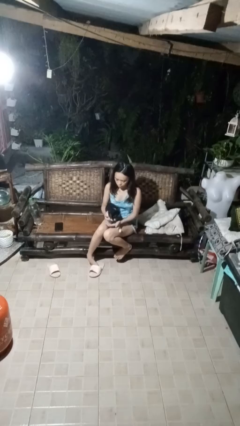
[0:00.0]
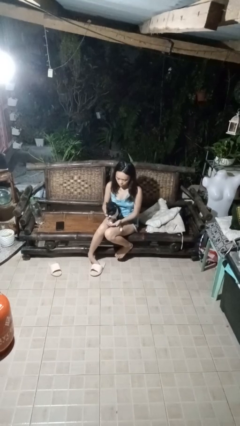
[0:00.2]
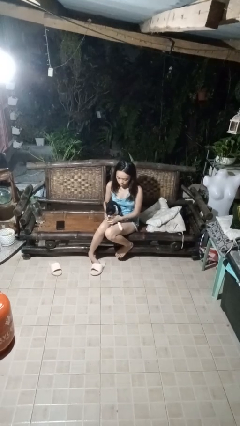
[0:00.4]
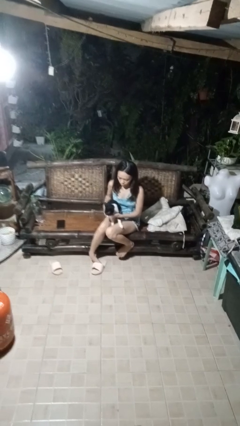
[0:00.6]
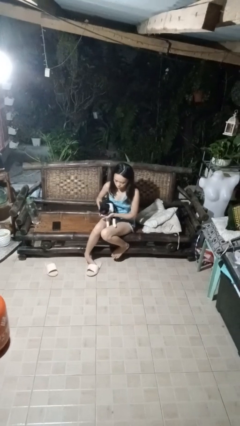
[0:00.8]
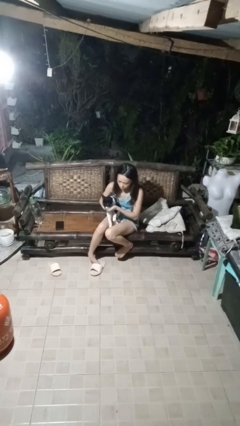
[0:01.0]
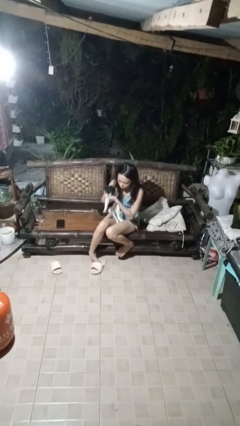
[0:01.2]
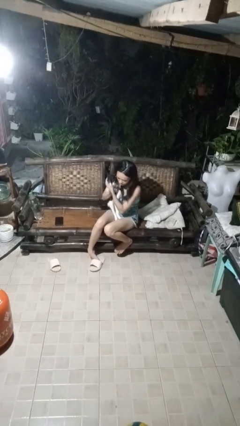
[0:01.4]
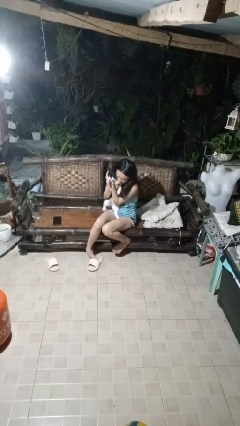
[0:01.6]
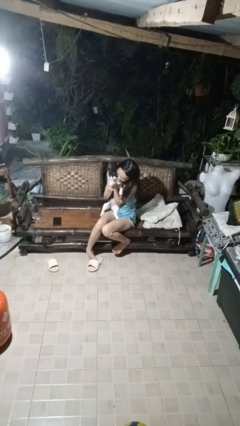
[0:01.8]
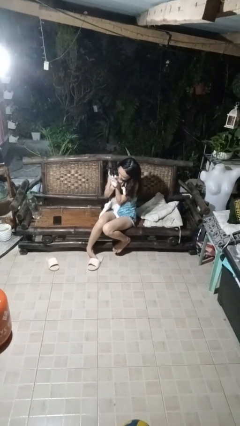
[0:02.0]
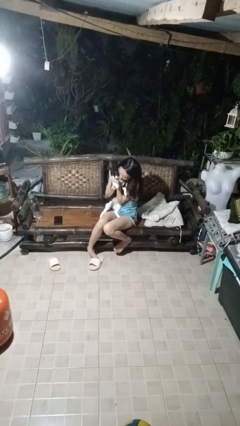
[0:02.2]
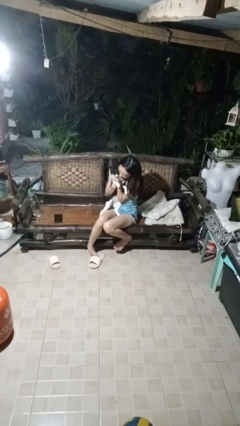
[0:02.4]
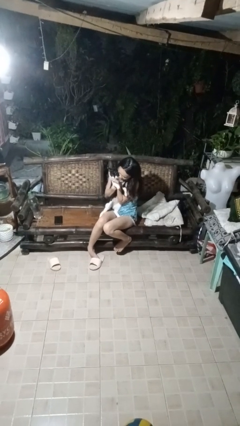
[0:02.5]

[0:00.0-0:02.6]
person hugs cat

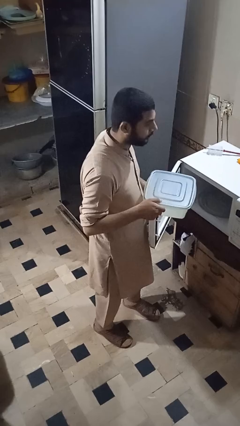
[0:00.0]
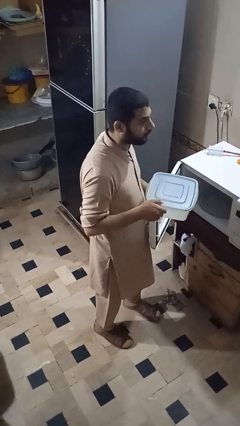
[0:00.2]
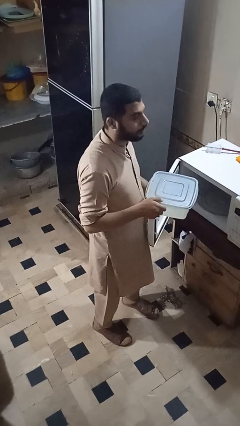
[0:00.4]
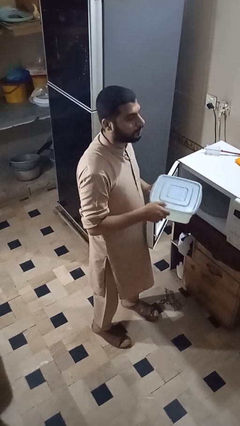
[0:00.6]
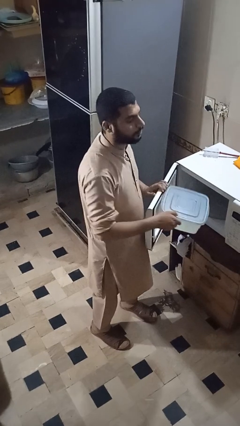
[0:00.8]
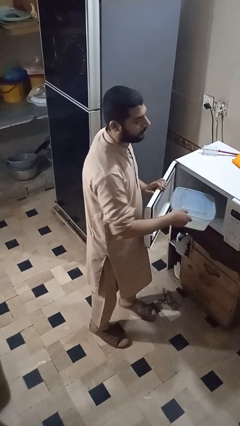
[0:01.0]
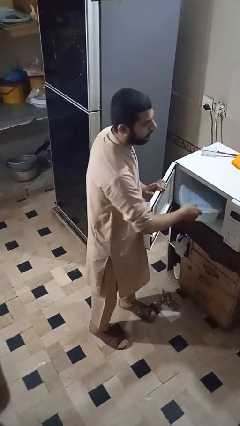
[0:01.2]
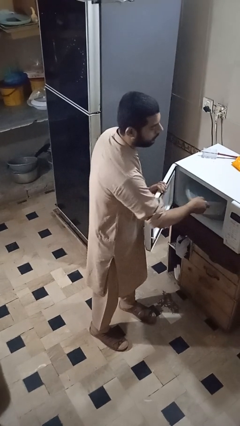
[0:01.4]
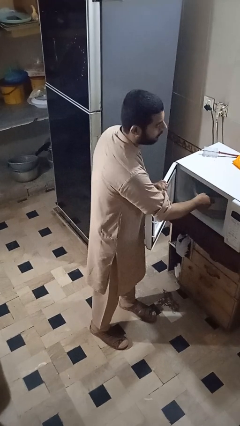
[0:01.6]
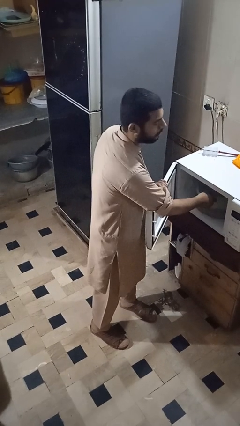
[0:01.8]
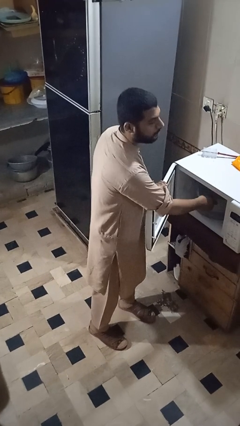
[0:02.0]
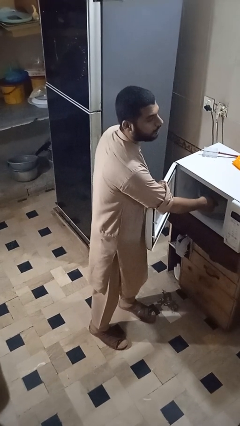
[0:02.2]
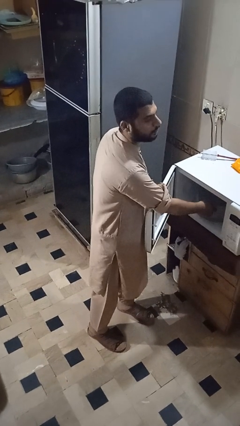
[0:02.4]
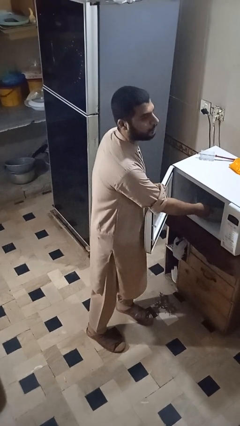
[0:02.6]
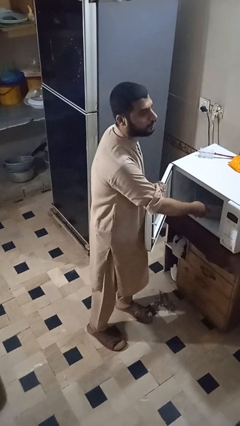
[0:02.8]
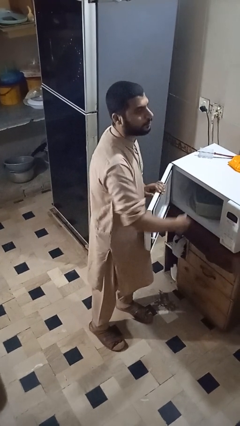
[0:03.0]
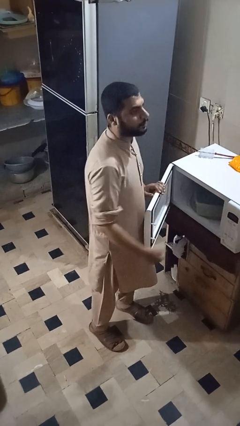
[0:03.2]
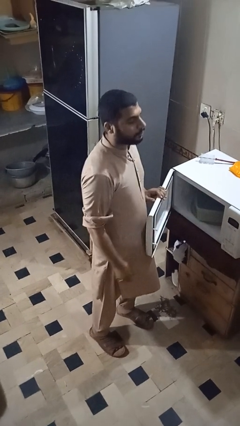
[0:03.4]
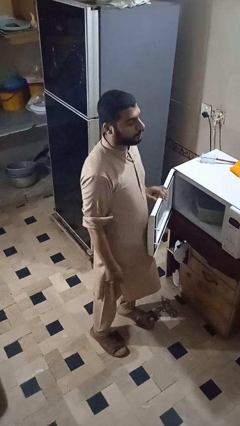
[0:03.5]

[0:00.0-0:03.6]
person puts object into microwave

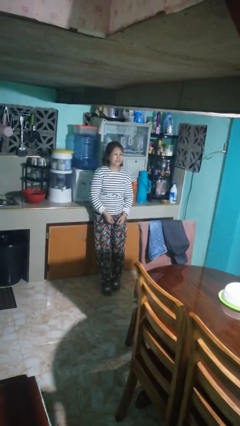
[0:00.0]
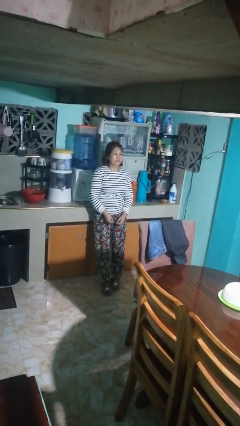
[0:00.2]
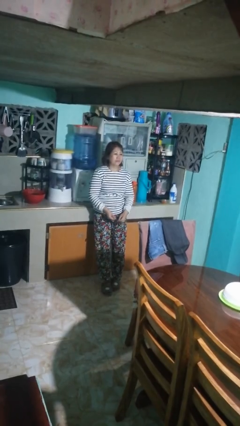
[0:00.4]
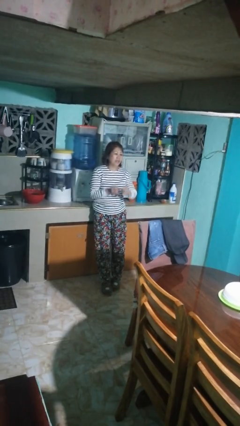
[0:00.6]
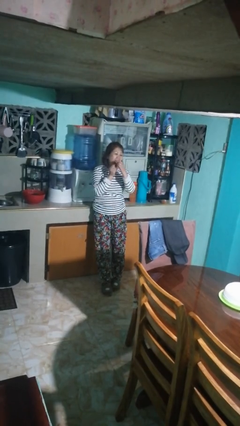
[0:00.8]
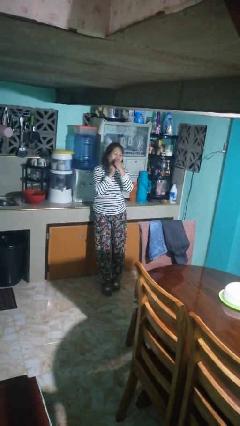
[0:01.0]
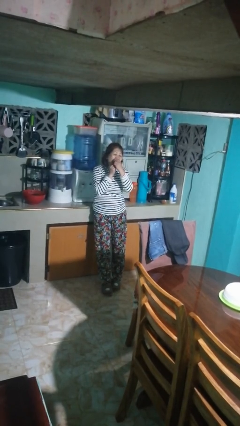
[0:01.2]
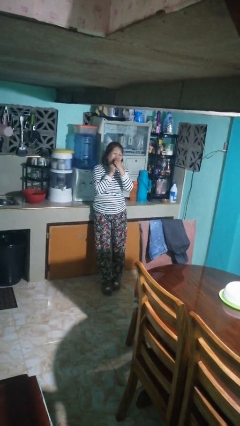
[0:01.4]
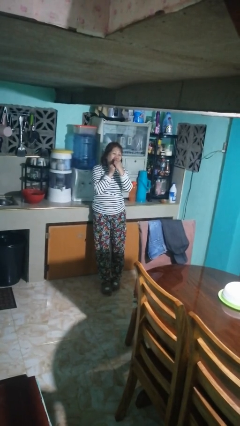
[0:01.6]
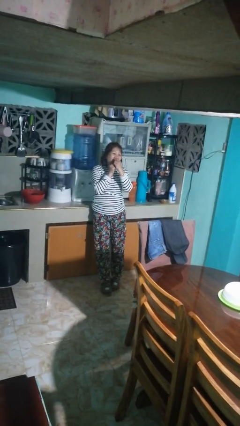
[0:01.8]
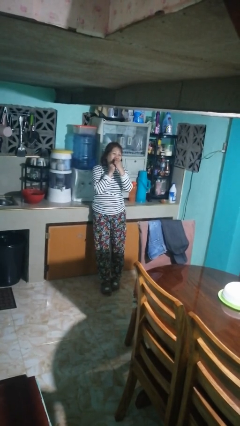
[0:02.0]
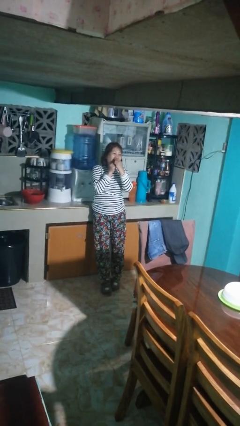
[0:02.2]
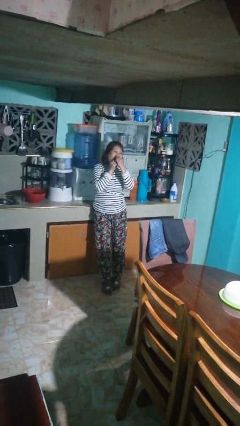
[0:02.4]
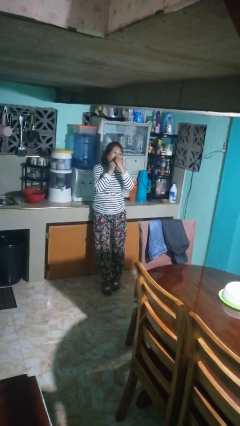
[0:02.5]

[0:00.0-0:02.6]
person flosses

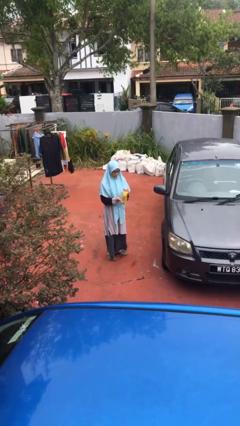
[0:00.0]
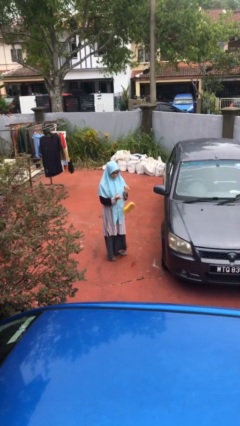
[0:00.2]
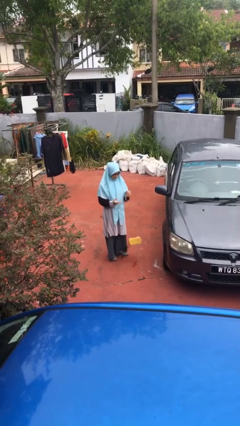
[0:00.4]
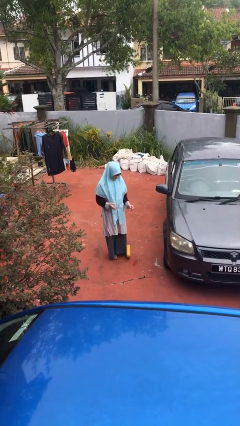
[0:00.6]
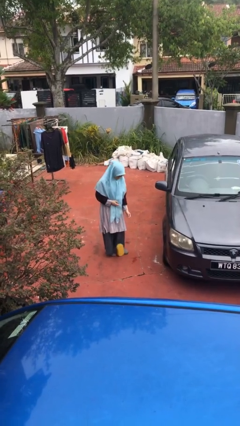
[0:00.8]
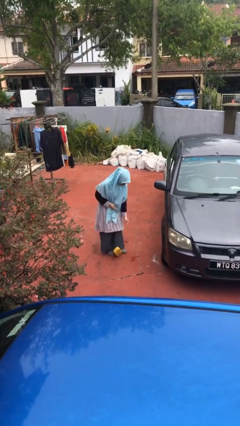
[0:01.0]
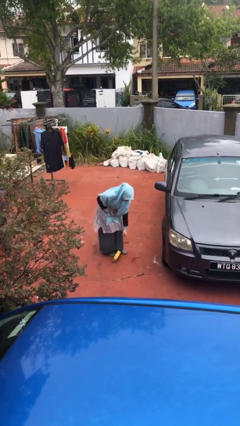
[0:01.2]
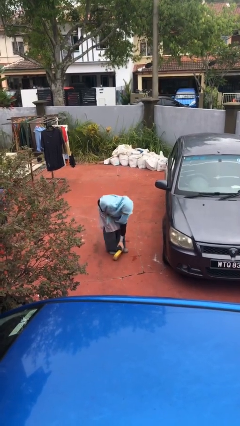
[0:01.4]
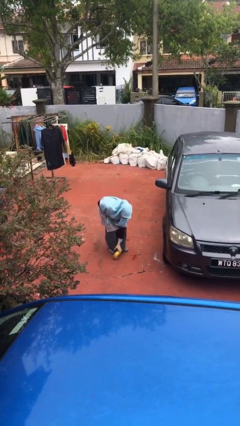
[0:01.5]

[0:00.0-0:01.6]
person drops object

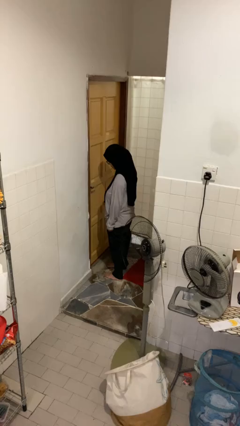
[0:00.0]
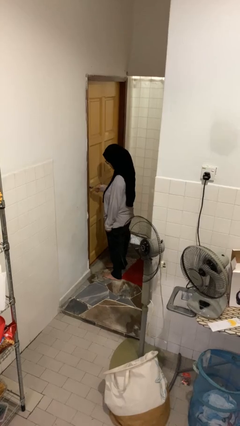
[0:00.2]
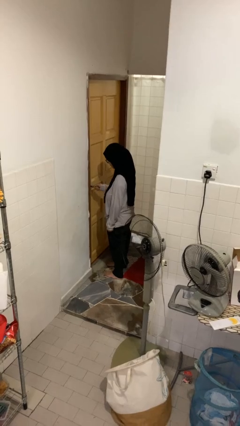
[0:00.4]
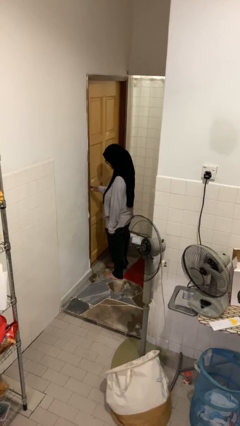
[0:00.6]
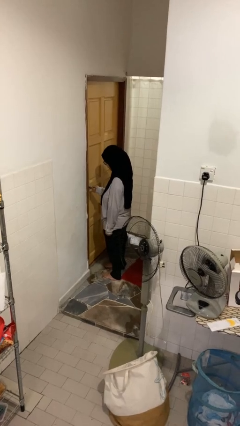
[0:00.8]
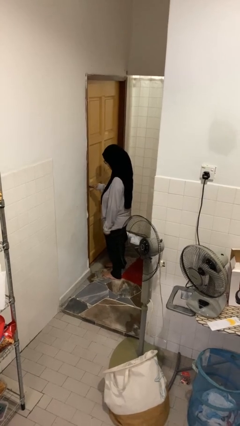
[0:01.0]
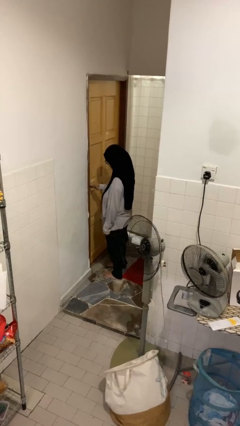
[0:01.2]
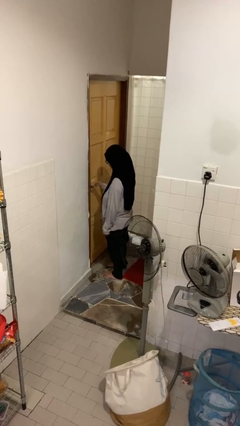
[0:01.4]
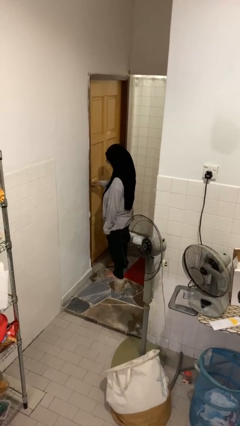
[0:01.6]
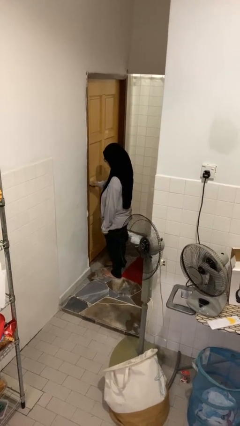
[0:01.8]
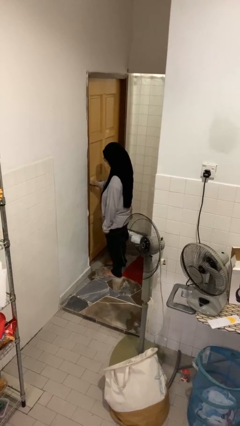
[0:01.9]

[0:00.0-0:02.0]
person unlocks door with keys

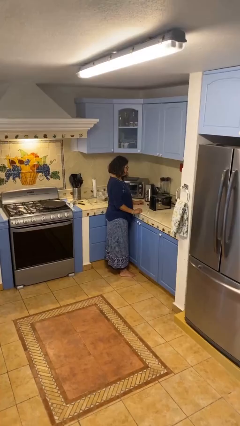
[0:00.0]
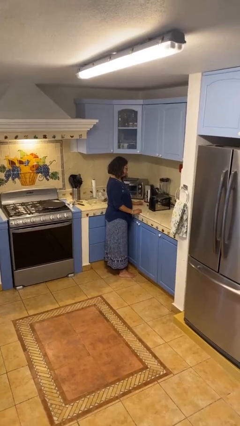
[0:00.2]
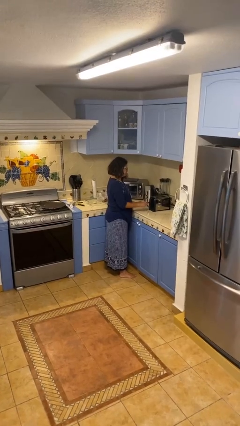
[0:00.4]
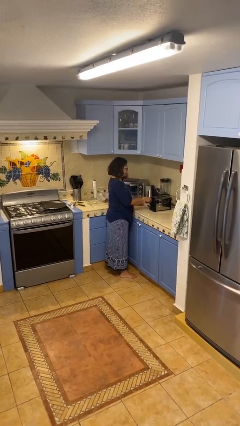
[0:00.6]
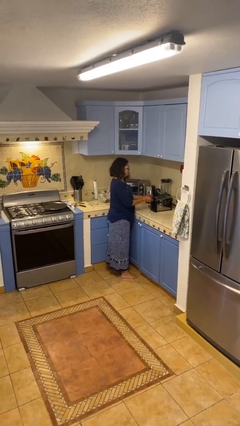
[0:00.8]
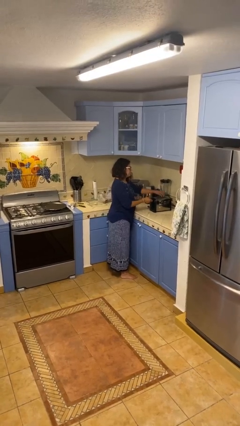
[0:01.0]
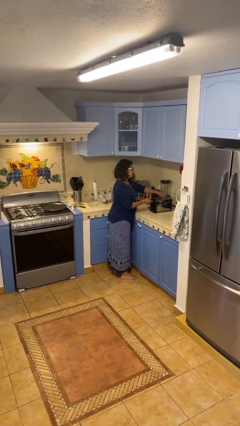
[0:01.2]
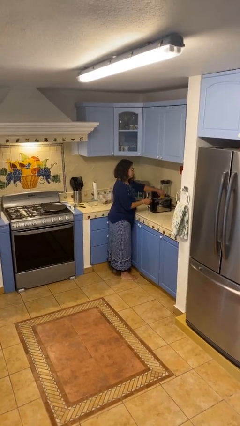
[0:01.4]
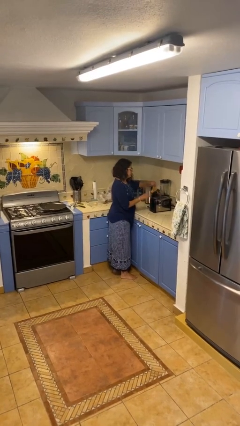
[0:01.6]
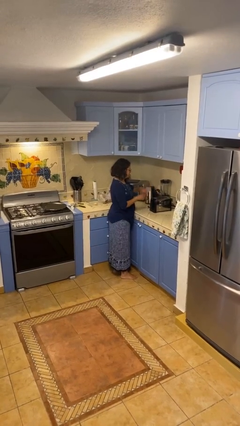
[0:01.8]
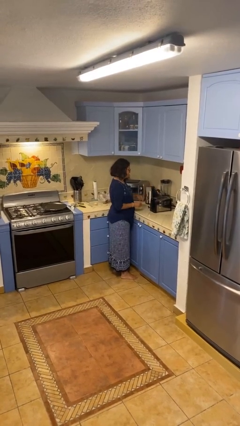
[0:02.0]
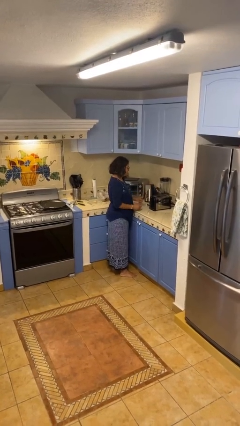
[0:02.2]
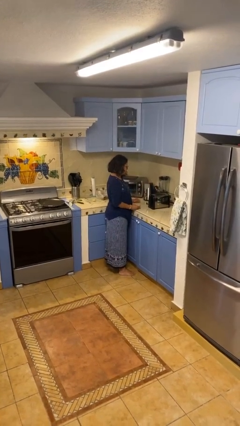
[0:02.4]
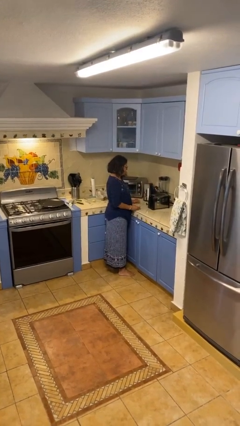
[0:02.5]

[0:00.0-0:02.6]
person takes object from toaster

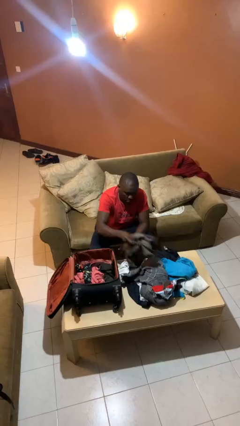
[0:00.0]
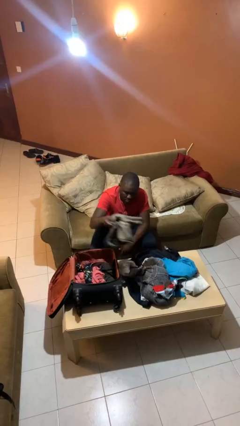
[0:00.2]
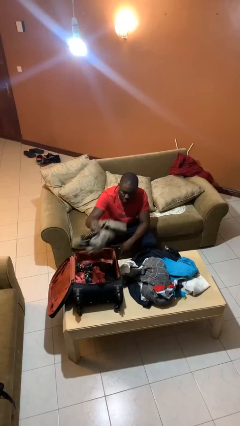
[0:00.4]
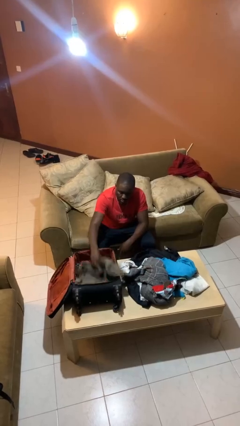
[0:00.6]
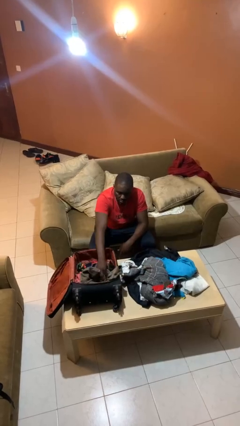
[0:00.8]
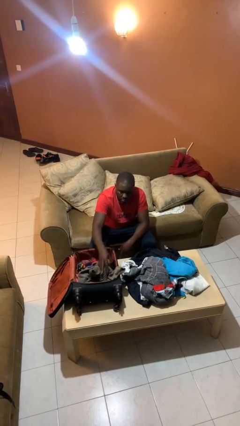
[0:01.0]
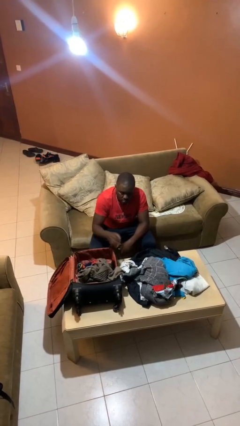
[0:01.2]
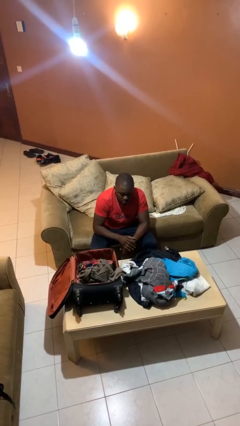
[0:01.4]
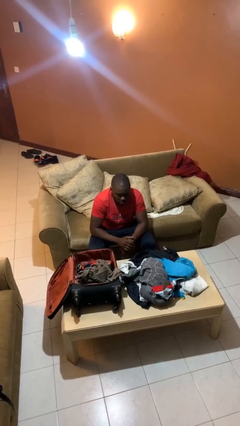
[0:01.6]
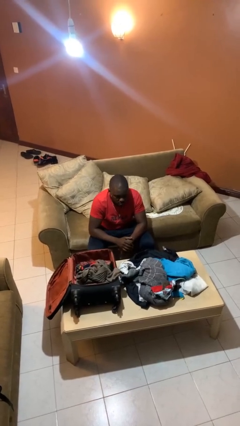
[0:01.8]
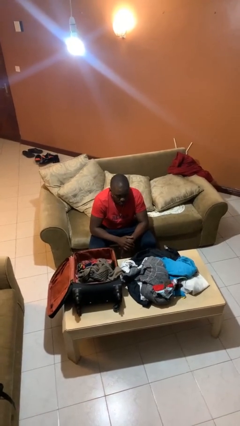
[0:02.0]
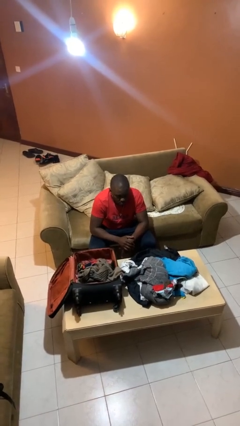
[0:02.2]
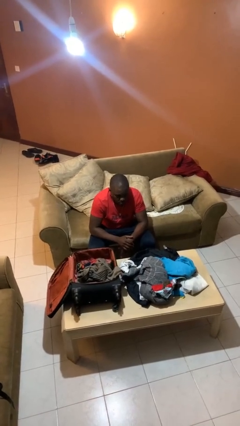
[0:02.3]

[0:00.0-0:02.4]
person loads clothes into suitcase
